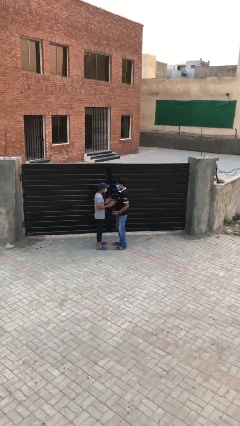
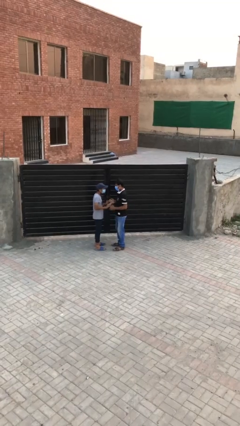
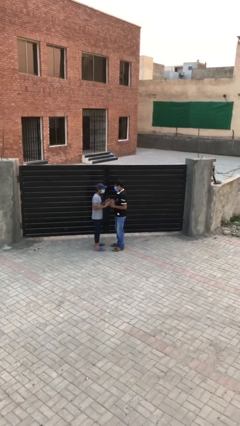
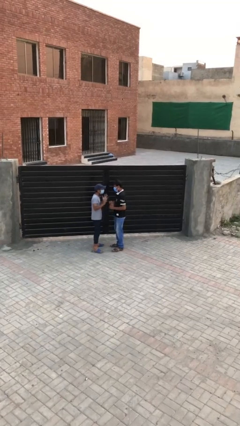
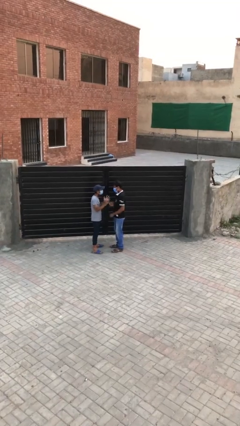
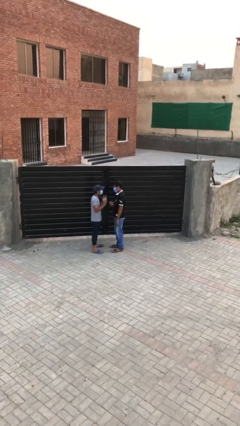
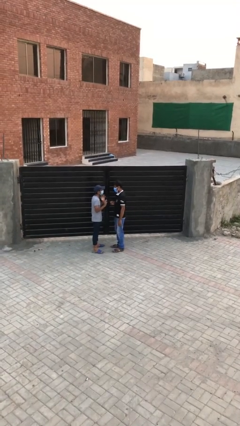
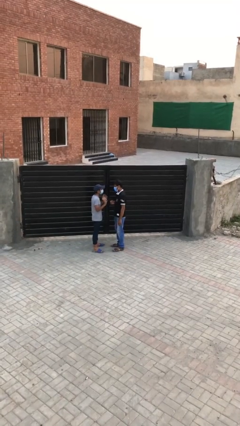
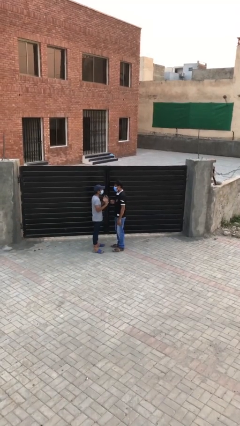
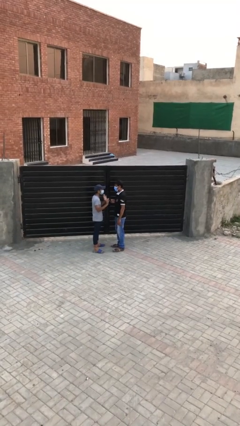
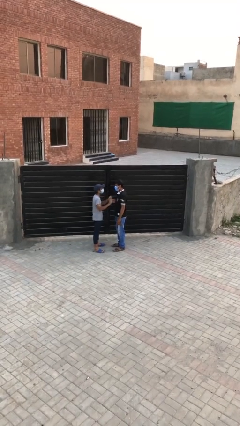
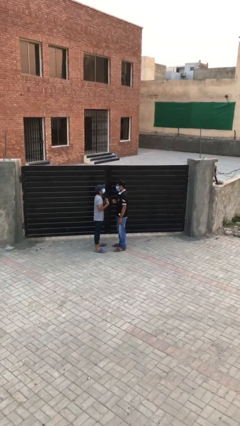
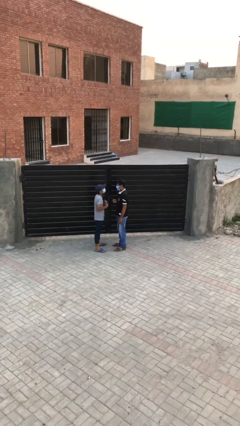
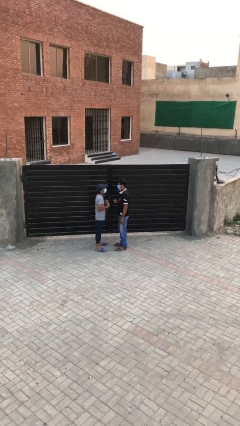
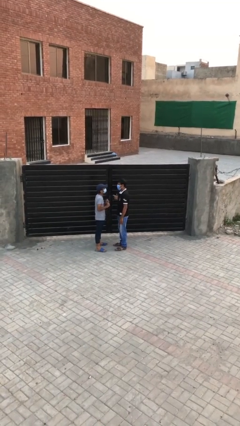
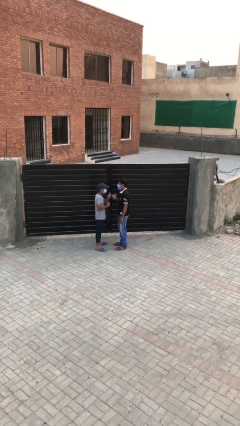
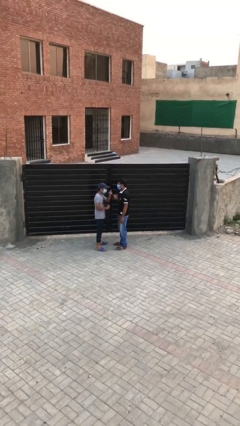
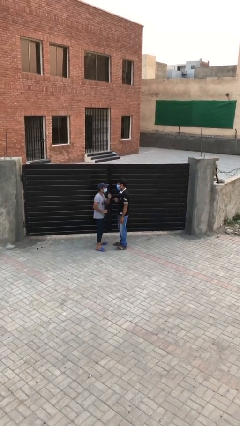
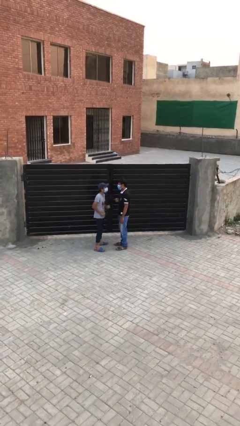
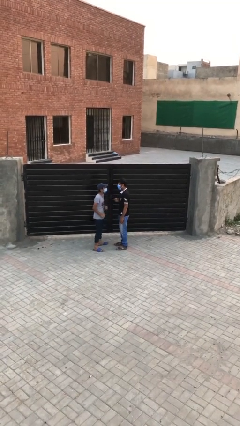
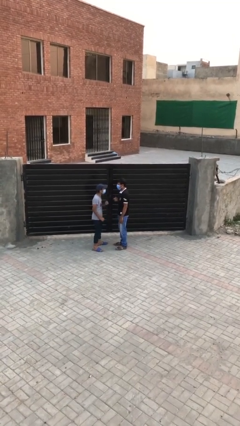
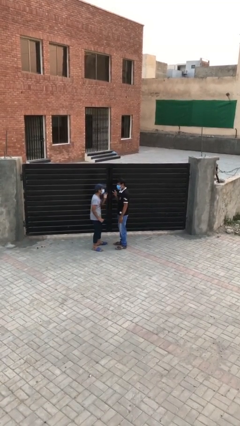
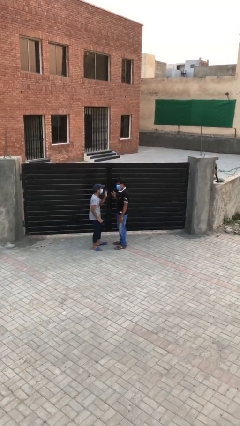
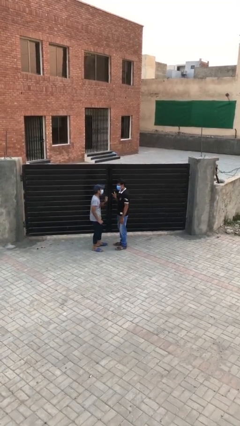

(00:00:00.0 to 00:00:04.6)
person talks to person

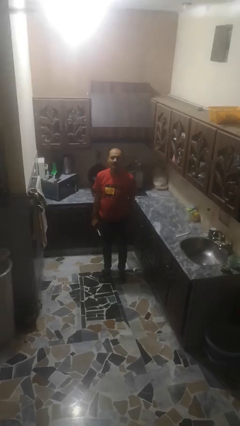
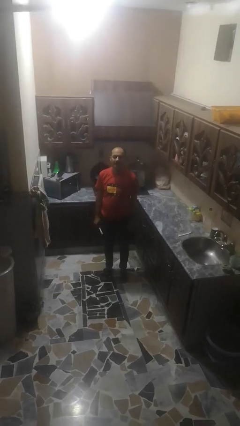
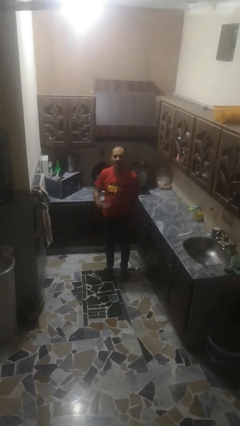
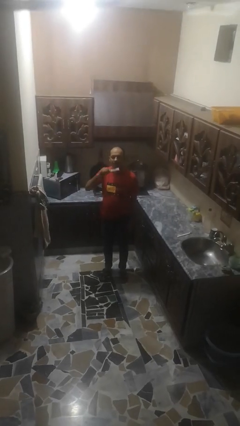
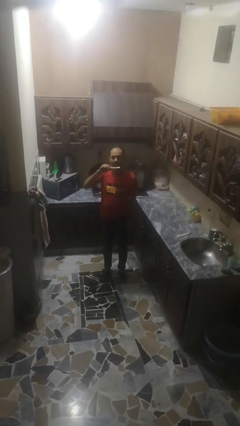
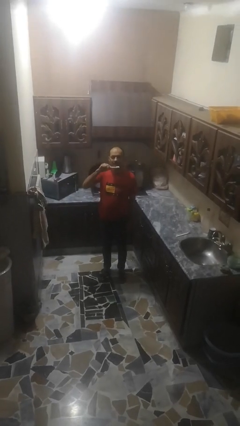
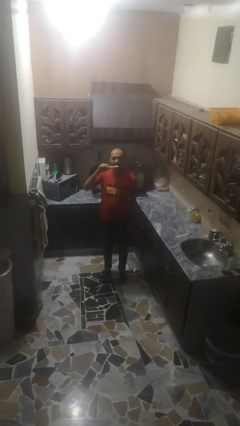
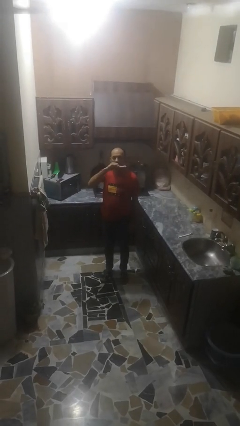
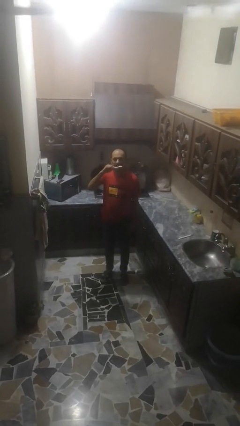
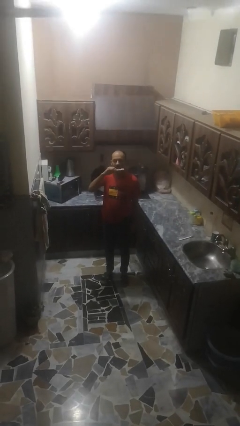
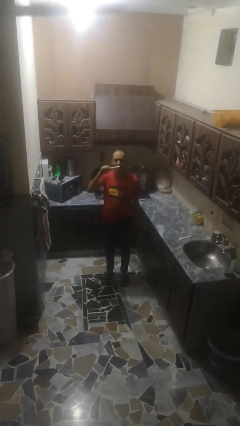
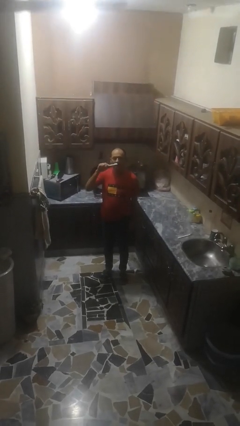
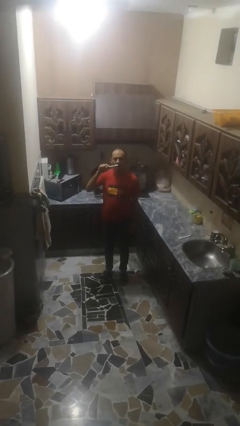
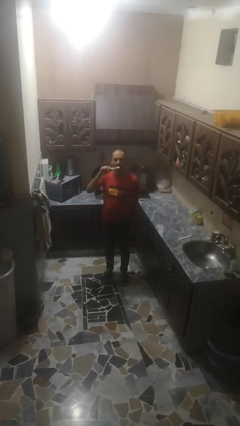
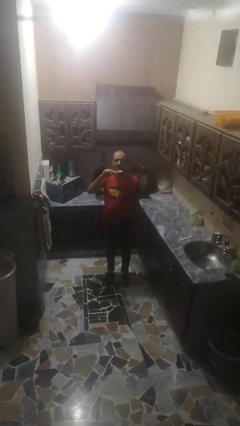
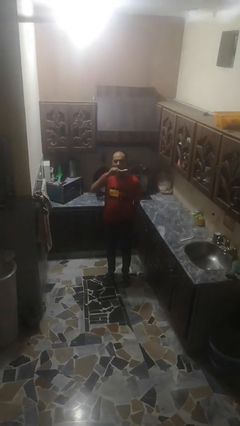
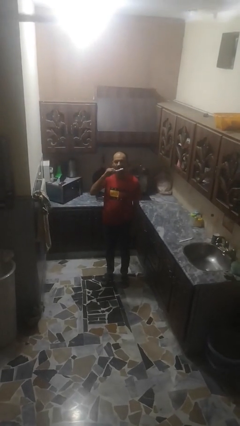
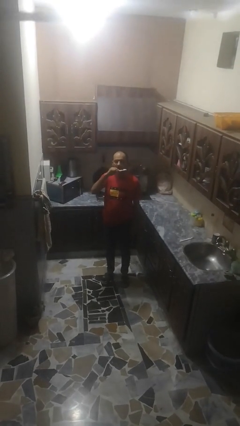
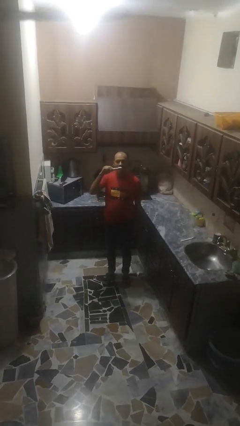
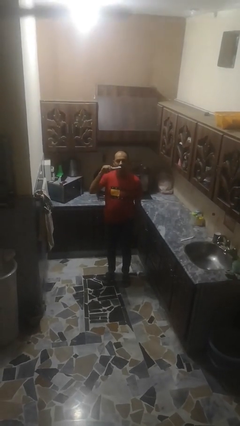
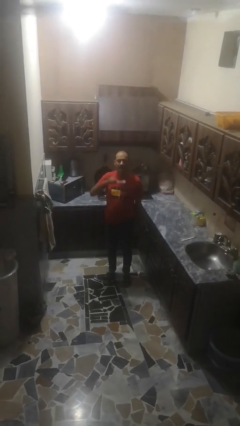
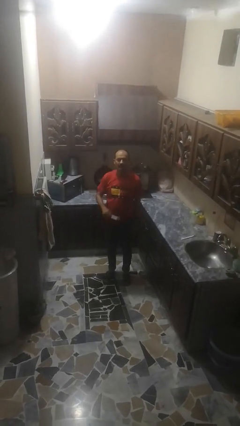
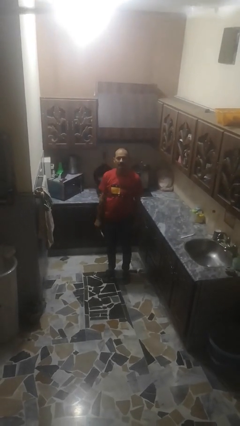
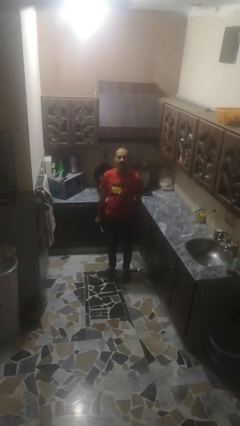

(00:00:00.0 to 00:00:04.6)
person brushes teeth

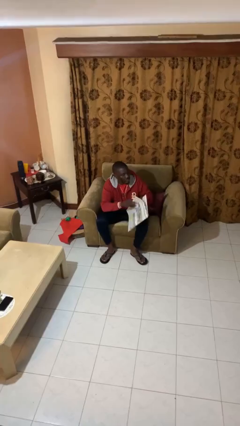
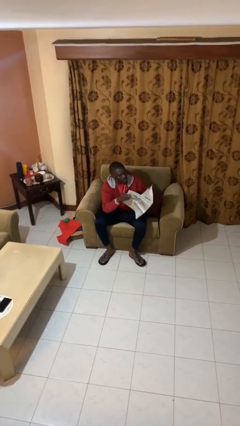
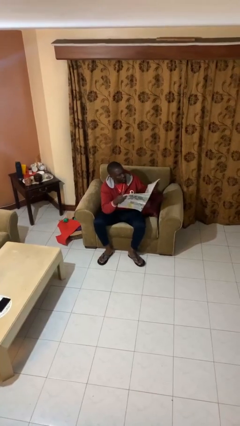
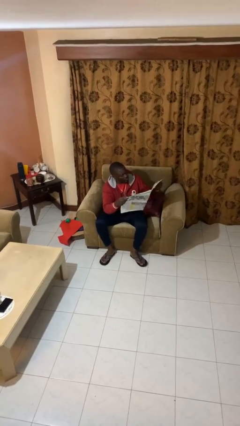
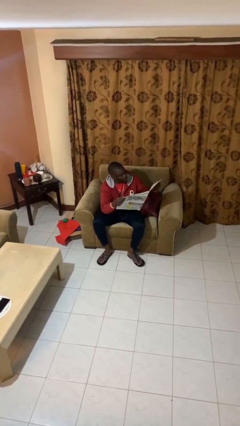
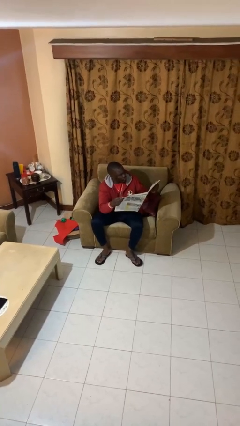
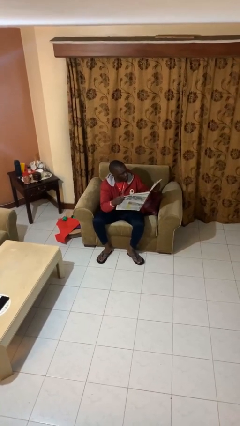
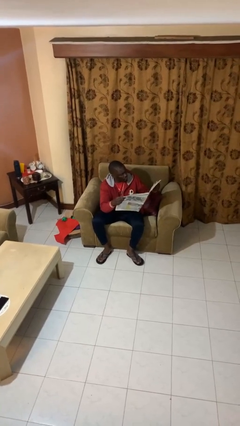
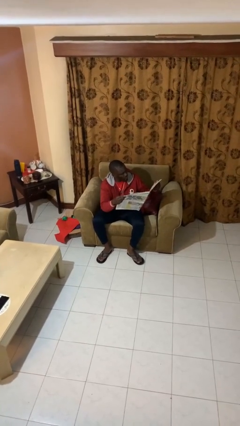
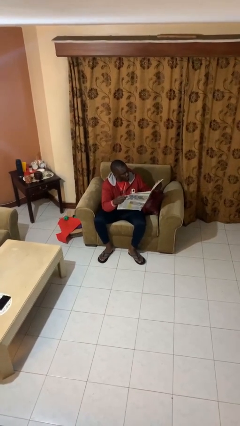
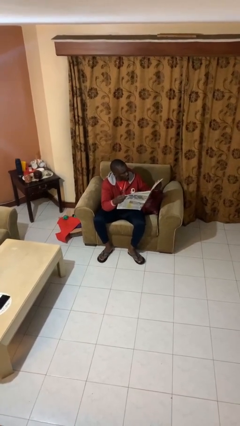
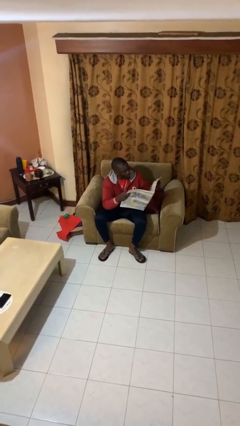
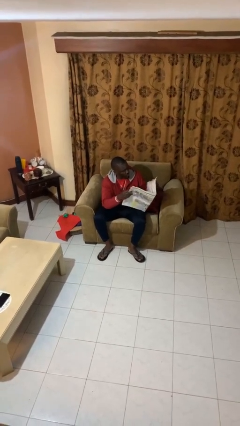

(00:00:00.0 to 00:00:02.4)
person reads newspaper

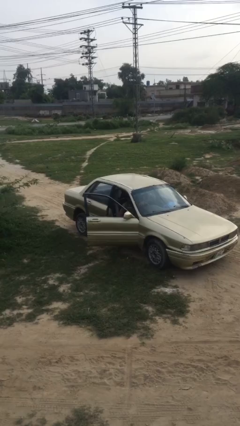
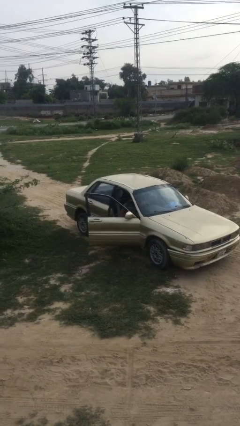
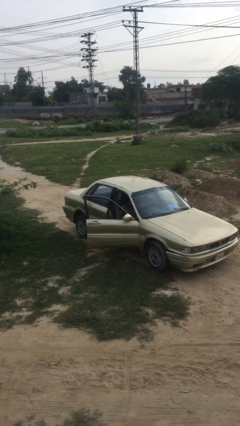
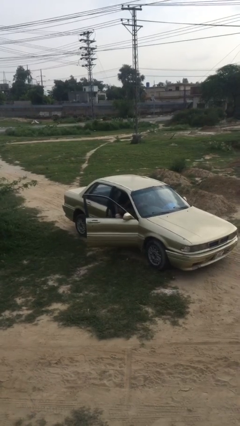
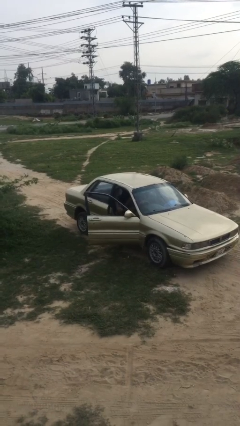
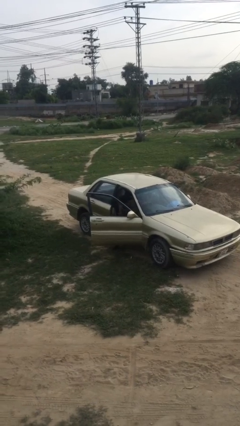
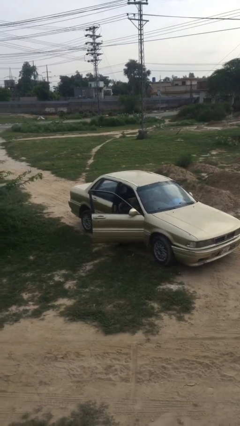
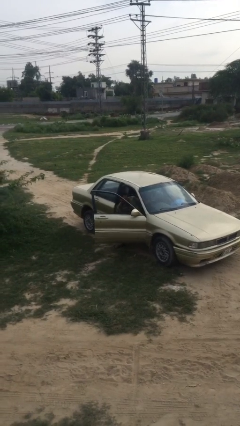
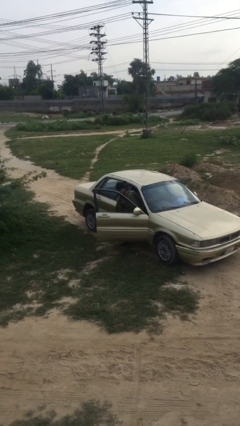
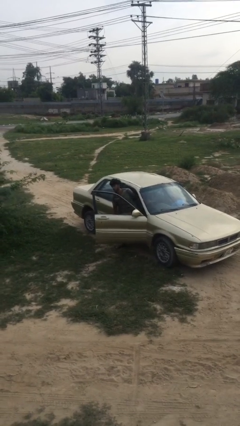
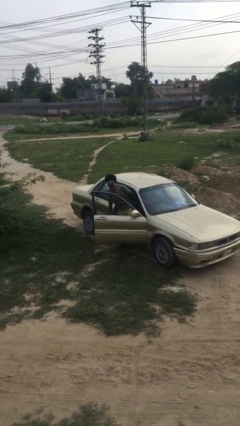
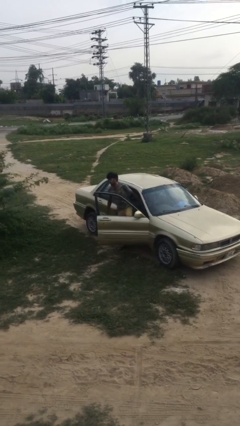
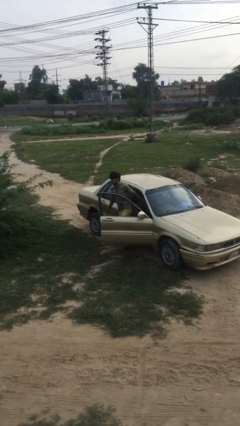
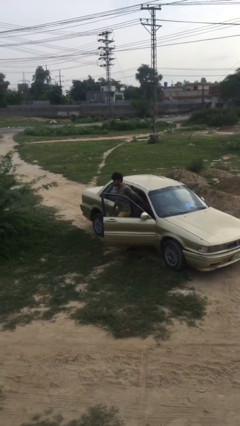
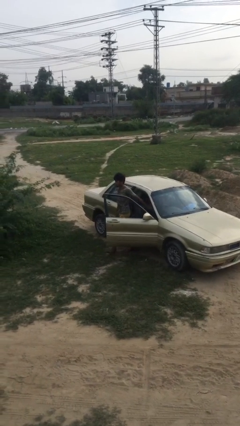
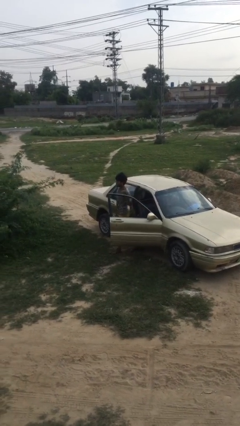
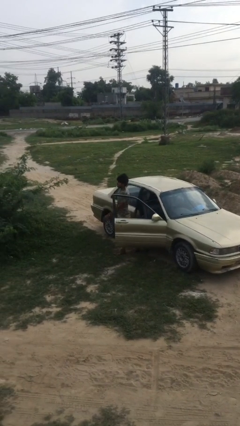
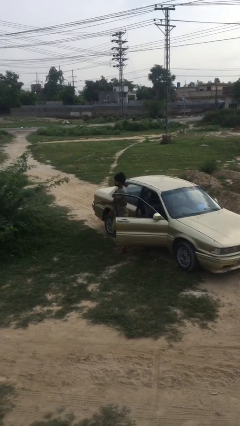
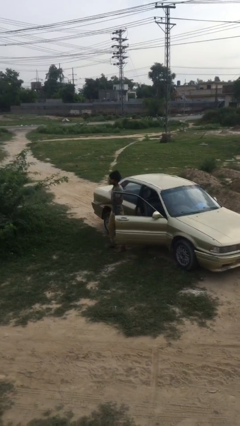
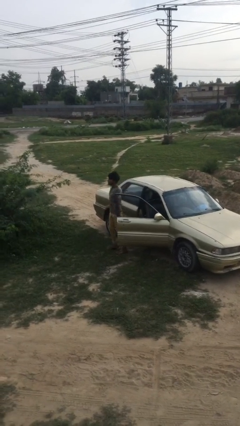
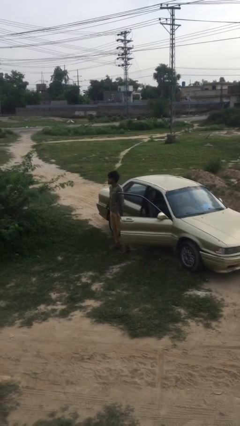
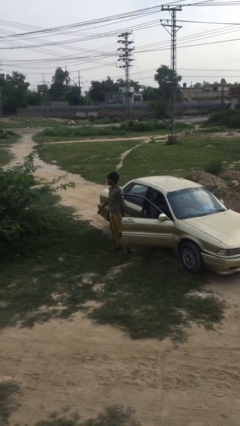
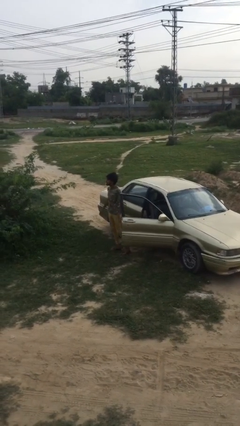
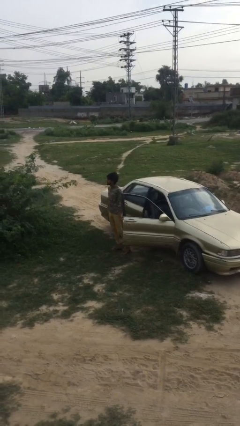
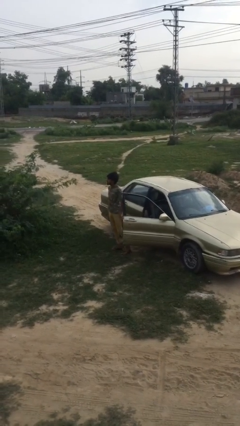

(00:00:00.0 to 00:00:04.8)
person exits car

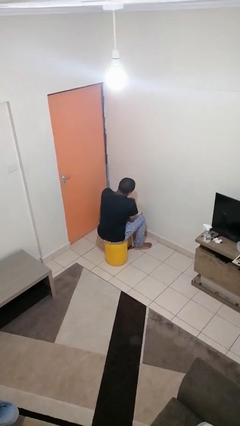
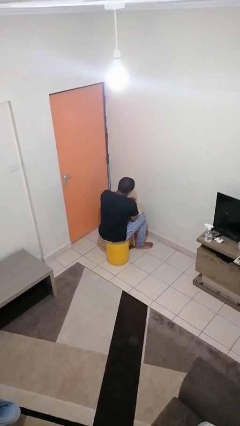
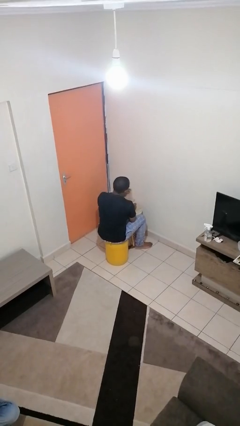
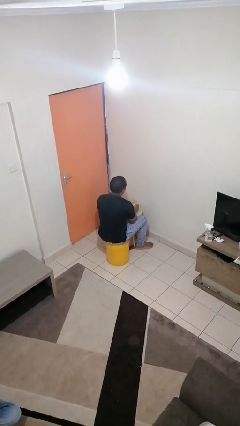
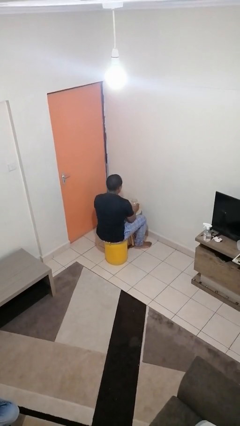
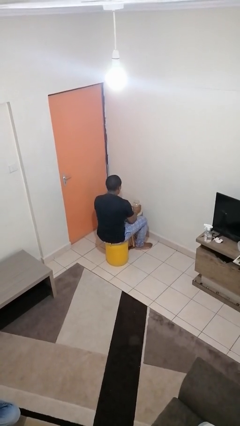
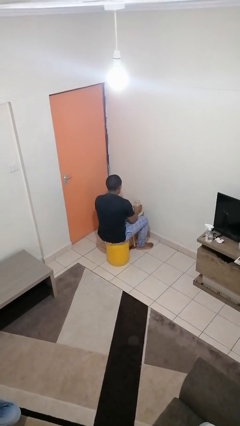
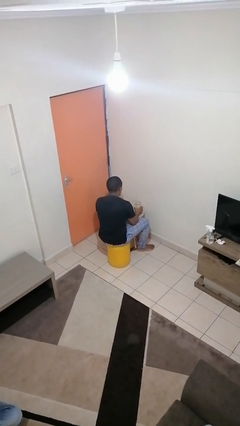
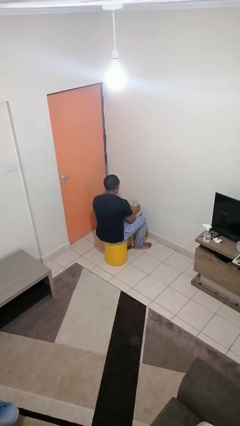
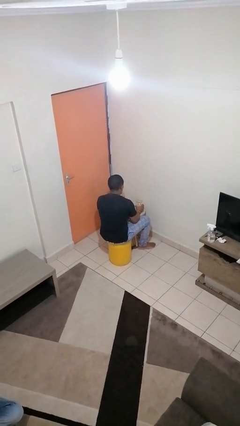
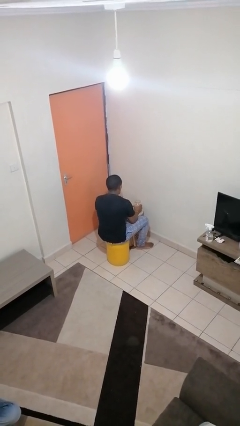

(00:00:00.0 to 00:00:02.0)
person opens jar
